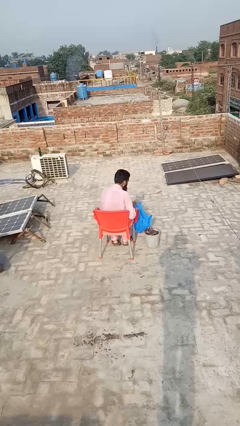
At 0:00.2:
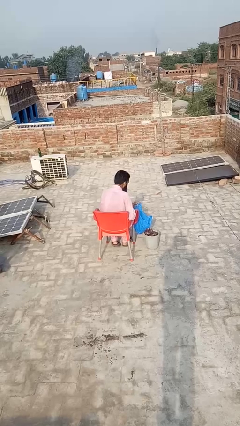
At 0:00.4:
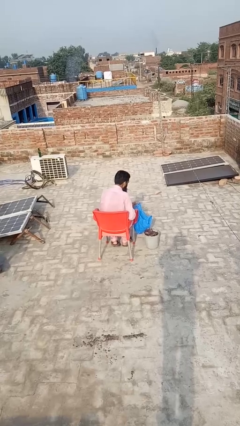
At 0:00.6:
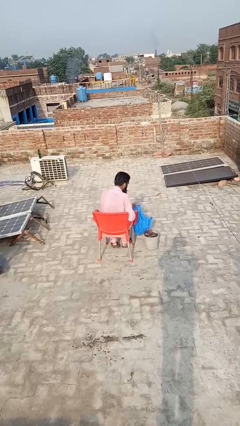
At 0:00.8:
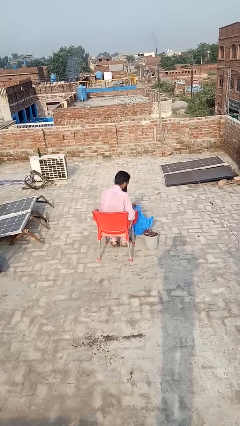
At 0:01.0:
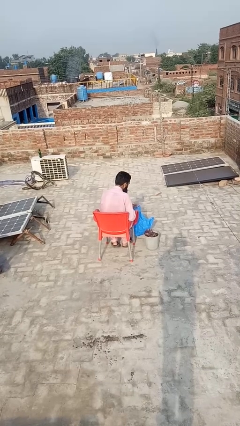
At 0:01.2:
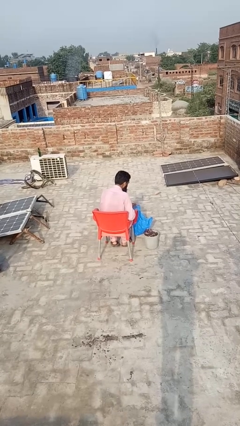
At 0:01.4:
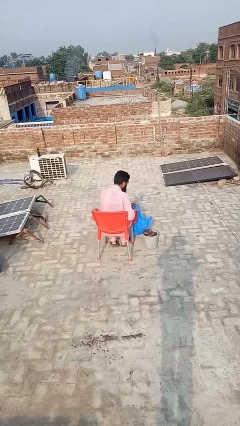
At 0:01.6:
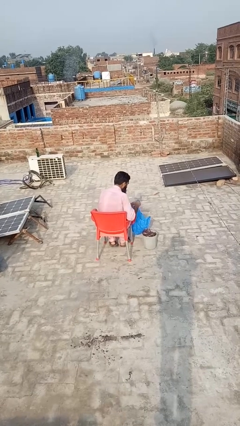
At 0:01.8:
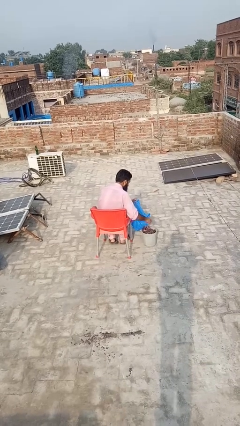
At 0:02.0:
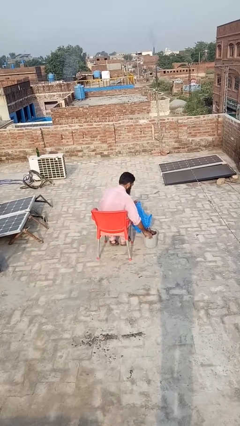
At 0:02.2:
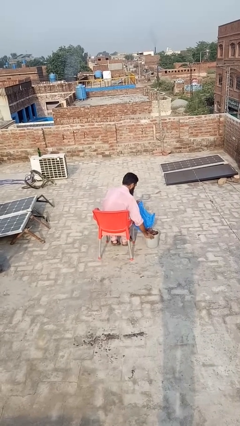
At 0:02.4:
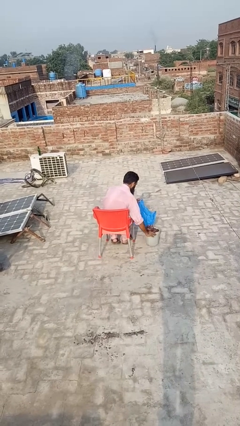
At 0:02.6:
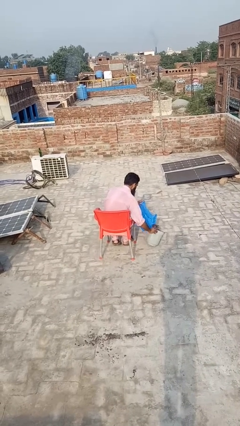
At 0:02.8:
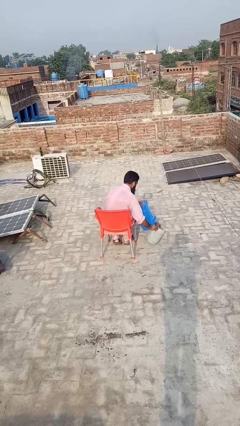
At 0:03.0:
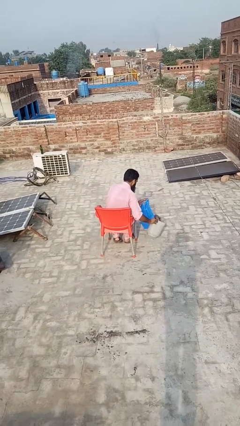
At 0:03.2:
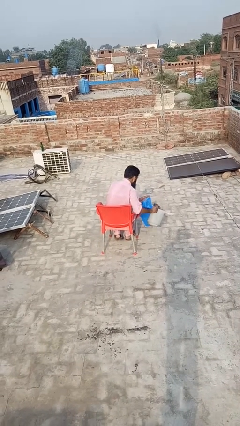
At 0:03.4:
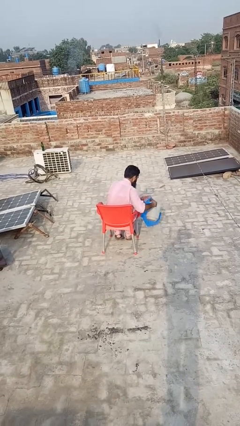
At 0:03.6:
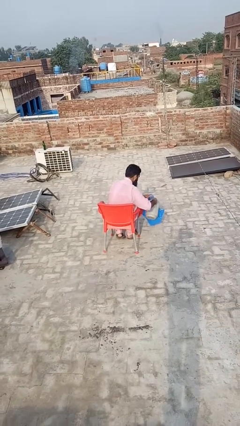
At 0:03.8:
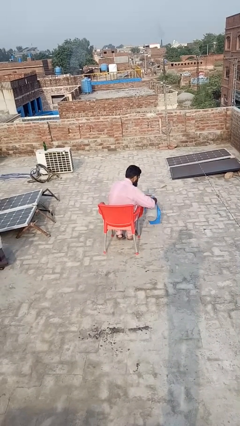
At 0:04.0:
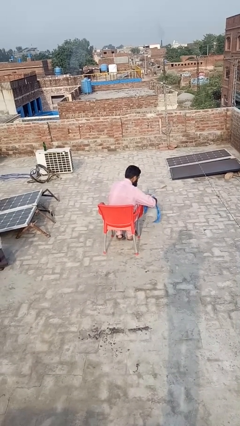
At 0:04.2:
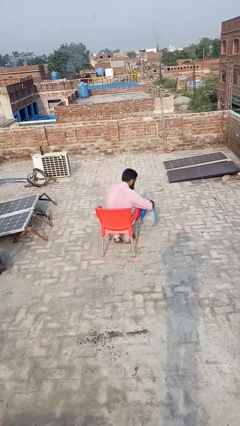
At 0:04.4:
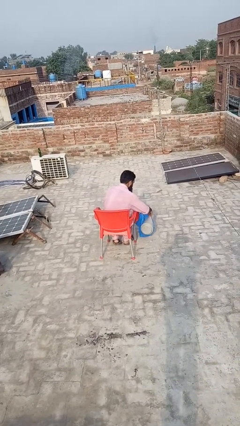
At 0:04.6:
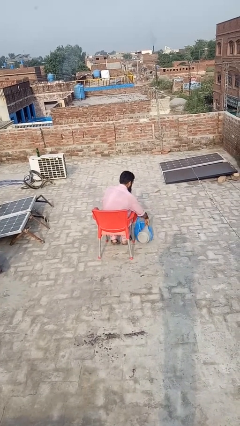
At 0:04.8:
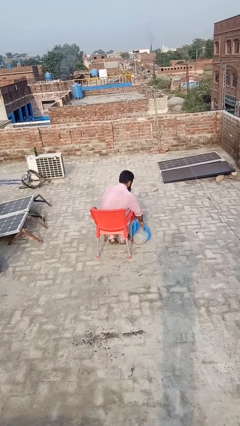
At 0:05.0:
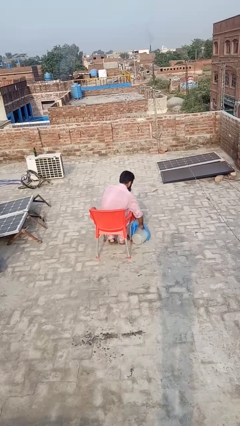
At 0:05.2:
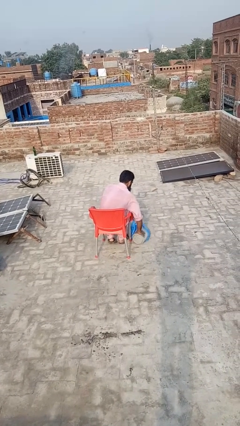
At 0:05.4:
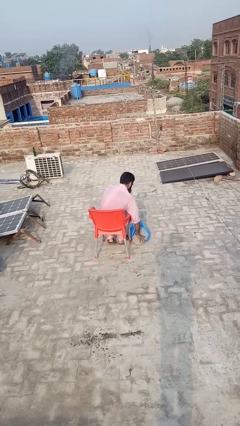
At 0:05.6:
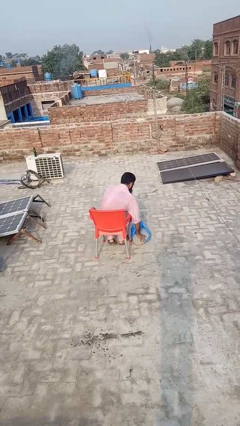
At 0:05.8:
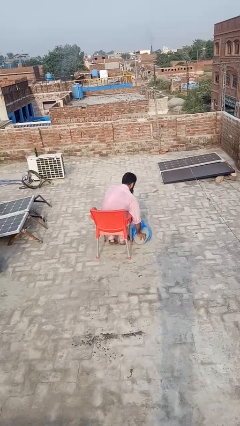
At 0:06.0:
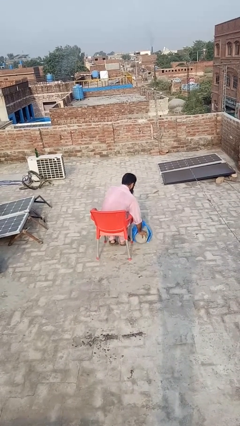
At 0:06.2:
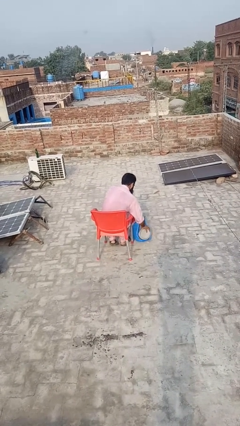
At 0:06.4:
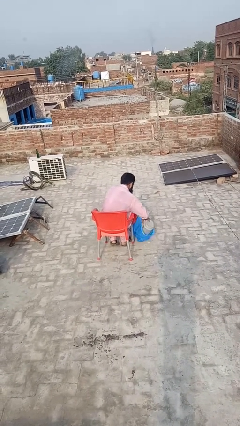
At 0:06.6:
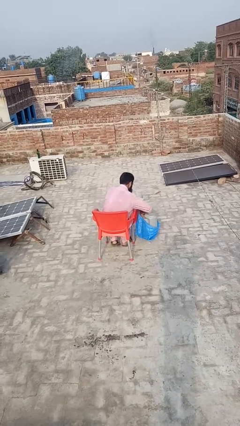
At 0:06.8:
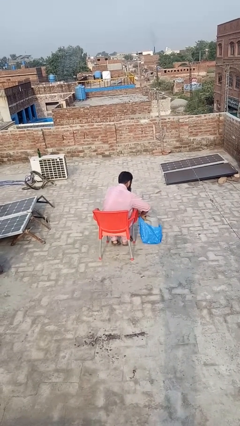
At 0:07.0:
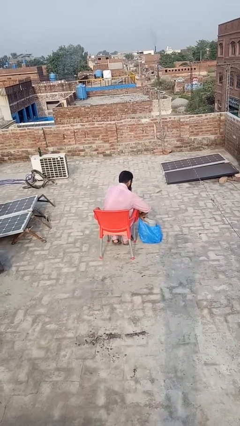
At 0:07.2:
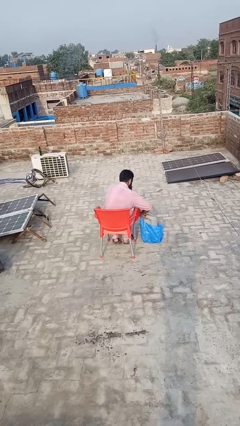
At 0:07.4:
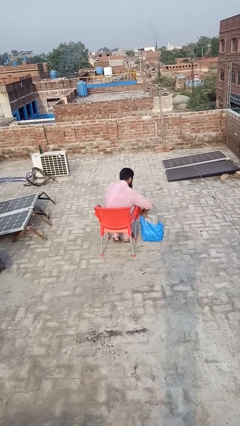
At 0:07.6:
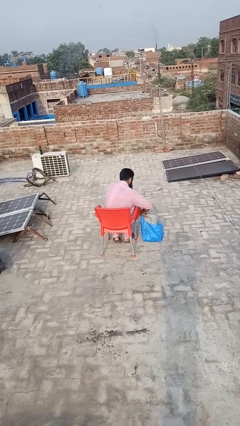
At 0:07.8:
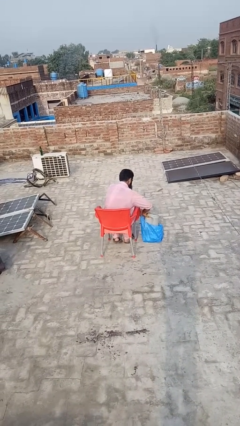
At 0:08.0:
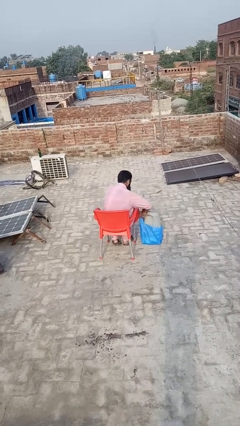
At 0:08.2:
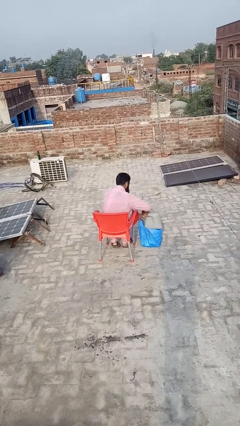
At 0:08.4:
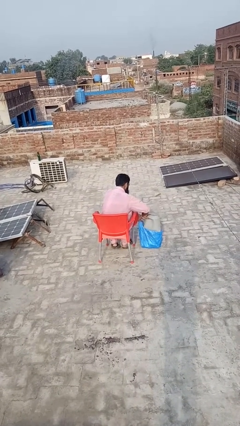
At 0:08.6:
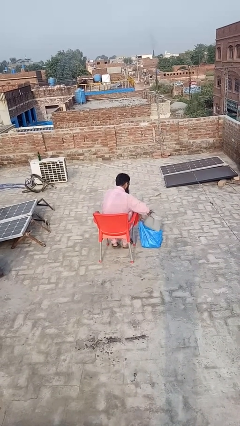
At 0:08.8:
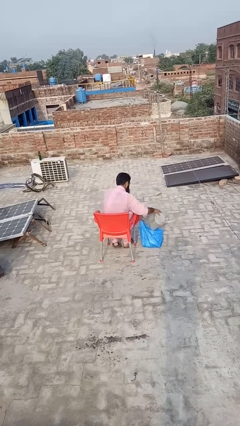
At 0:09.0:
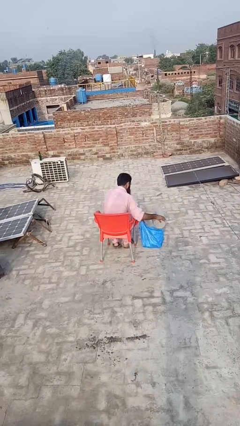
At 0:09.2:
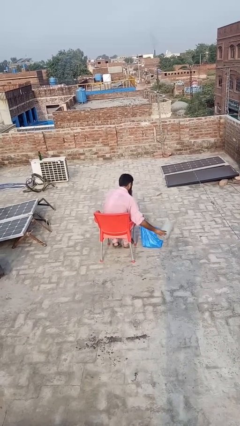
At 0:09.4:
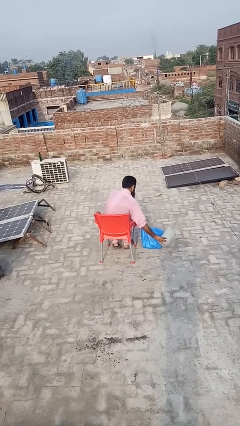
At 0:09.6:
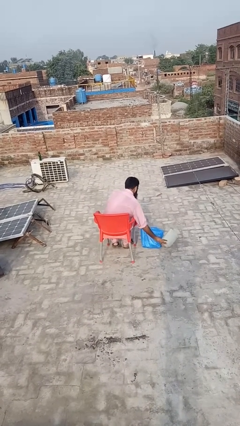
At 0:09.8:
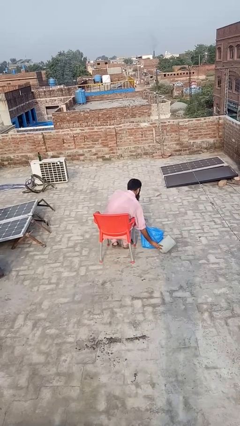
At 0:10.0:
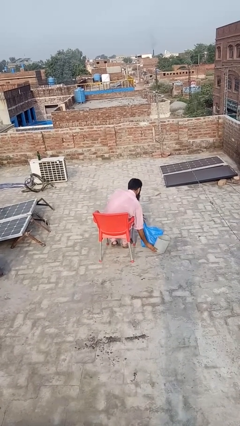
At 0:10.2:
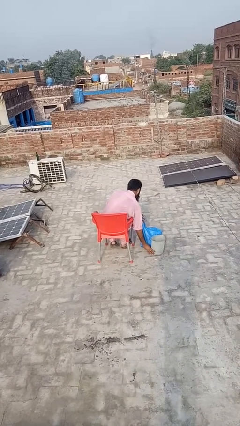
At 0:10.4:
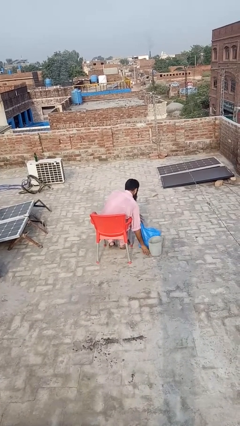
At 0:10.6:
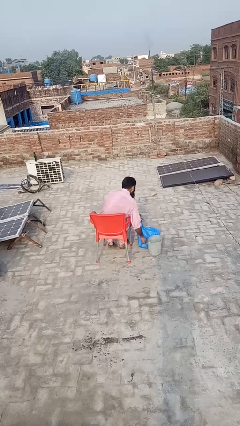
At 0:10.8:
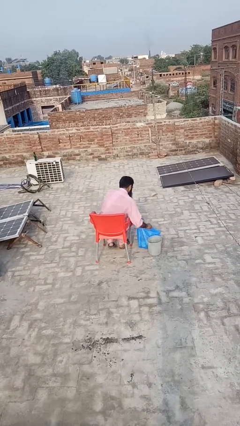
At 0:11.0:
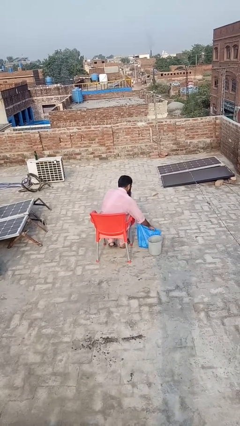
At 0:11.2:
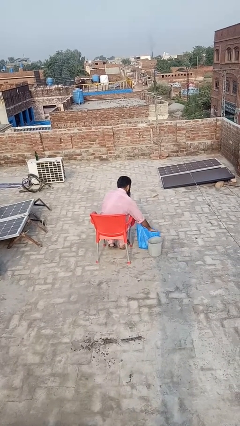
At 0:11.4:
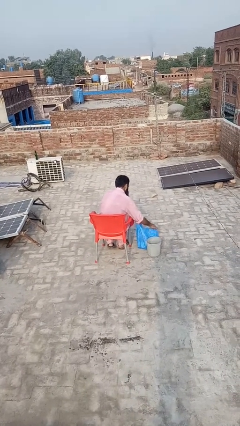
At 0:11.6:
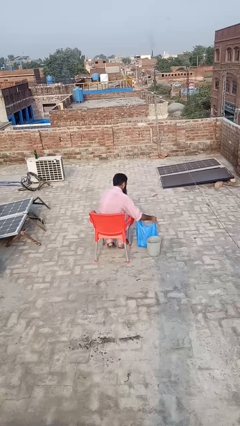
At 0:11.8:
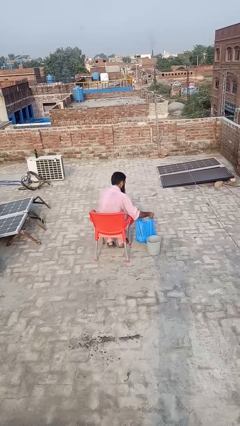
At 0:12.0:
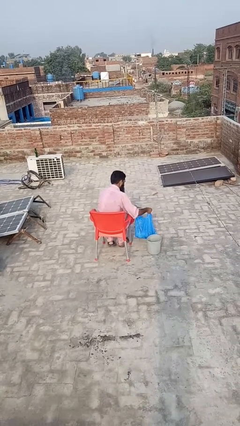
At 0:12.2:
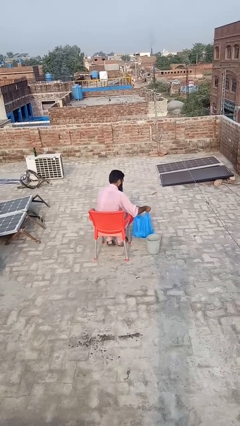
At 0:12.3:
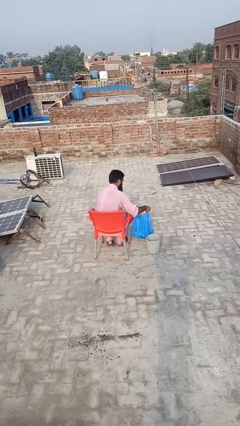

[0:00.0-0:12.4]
person removes trashbag from trashcan

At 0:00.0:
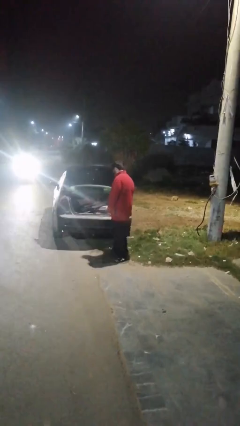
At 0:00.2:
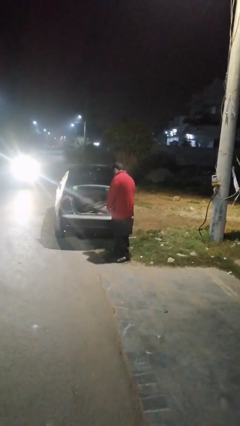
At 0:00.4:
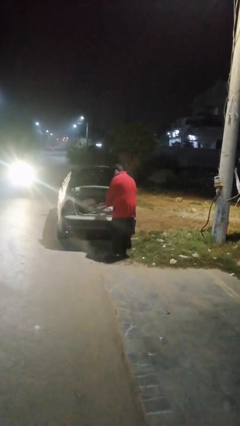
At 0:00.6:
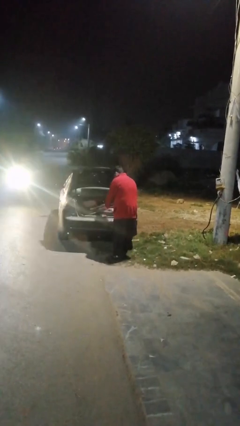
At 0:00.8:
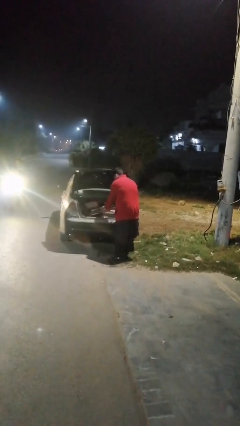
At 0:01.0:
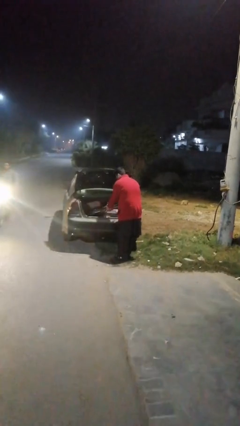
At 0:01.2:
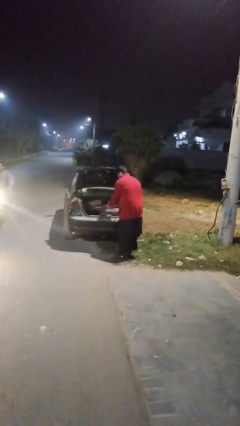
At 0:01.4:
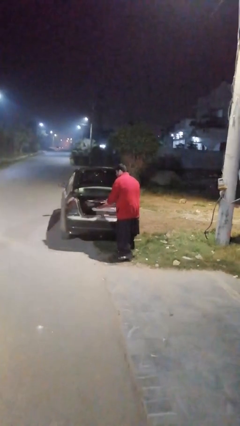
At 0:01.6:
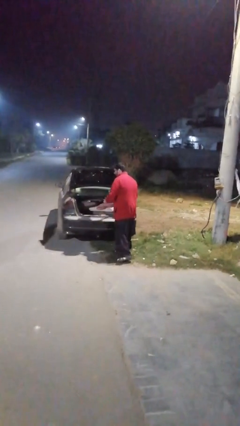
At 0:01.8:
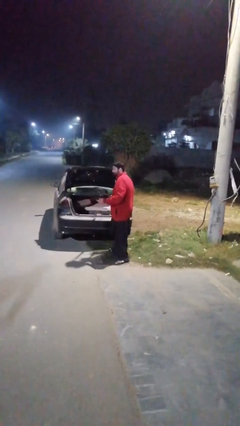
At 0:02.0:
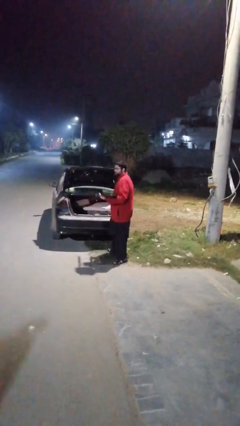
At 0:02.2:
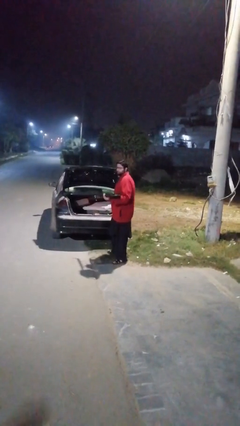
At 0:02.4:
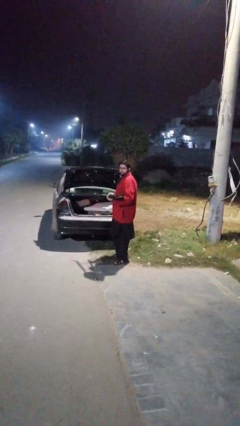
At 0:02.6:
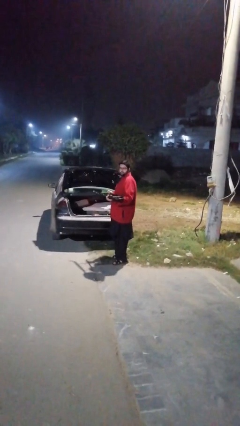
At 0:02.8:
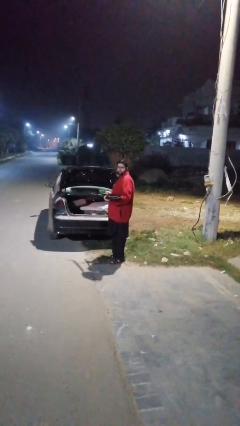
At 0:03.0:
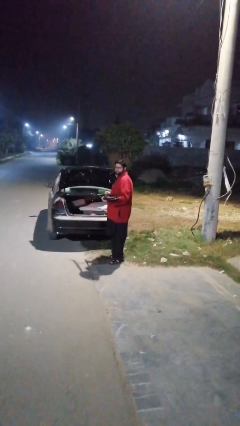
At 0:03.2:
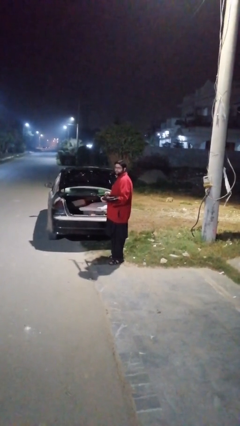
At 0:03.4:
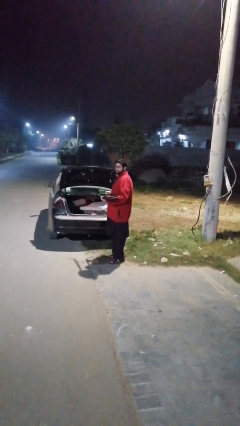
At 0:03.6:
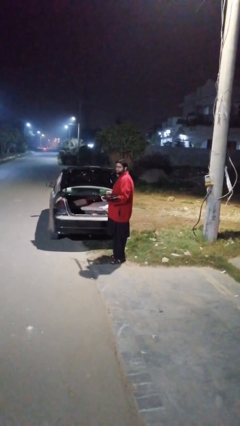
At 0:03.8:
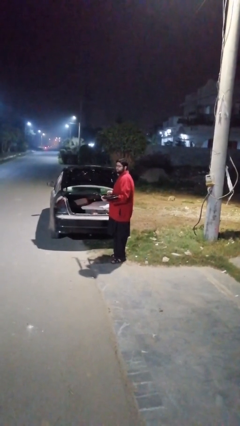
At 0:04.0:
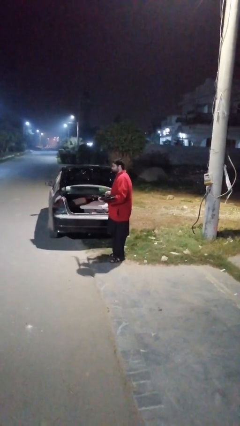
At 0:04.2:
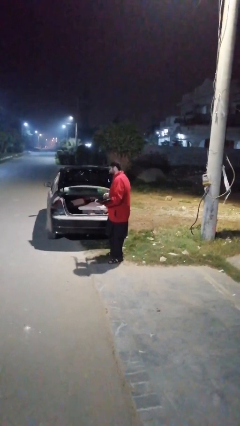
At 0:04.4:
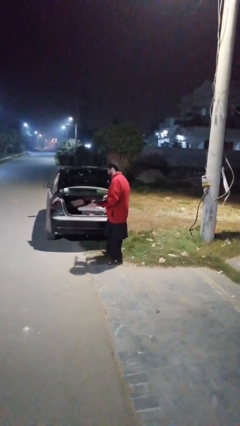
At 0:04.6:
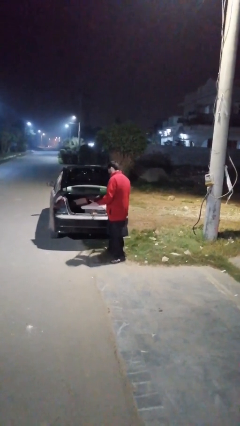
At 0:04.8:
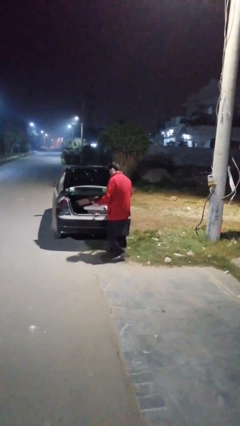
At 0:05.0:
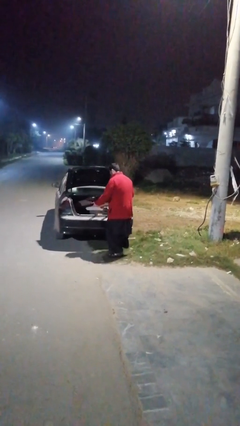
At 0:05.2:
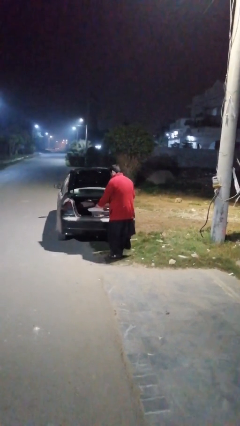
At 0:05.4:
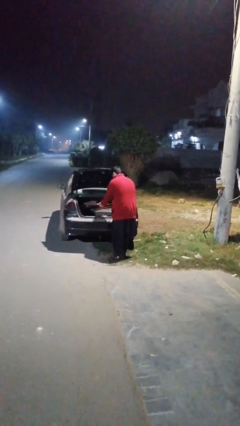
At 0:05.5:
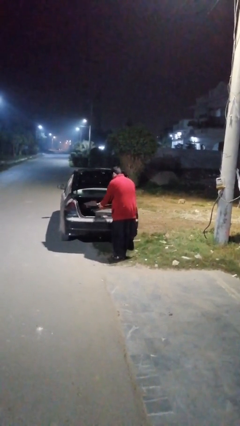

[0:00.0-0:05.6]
person unloads car

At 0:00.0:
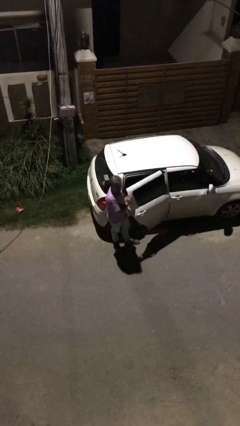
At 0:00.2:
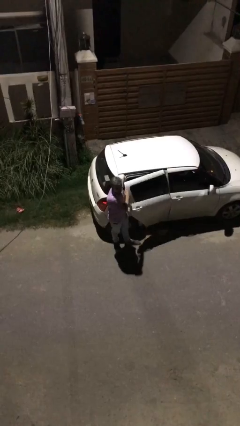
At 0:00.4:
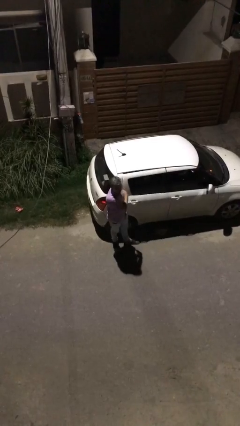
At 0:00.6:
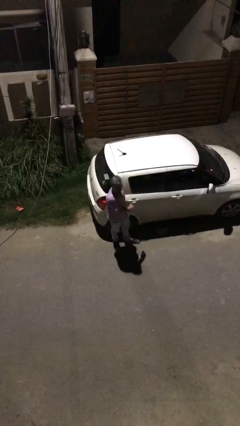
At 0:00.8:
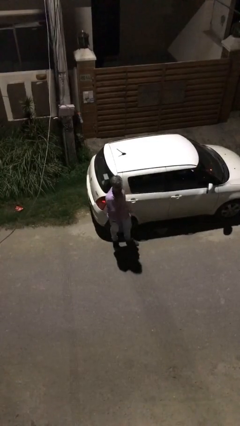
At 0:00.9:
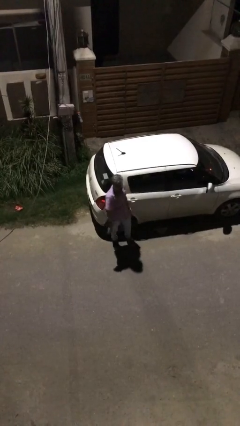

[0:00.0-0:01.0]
person closes car door
